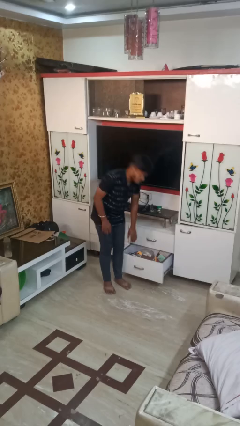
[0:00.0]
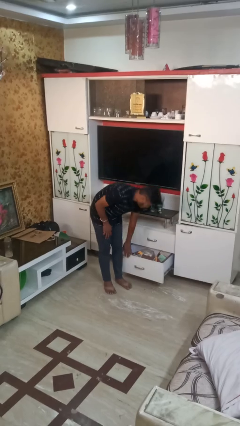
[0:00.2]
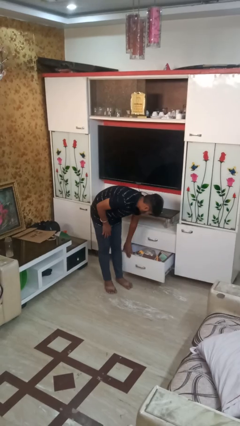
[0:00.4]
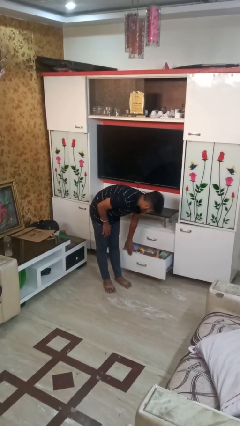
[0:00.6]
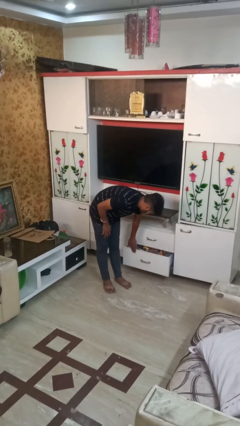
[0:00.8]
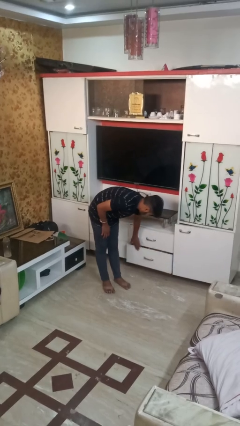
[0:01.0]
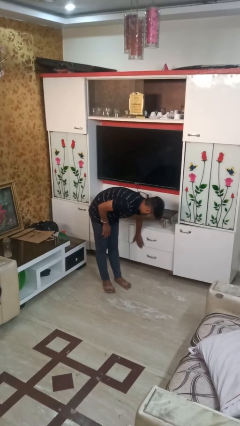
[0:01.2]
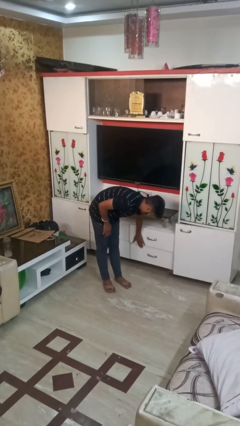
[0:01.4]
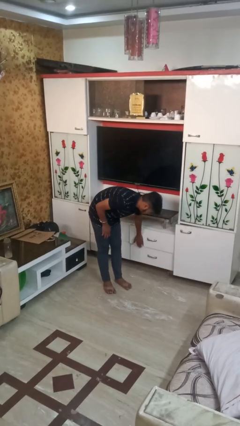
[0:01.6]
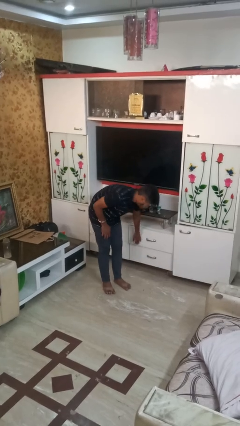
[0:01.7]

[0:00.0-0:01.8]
person closes dresser drawer

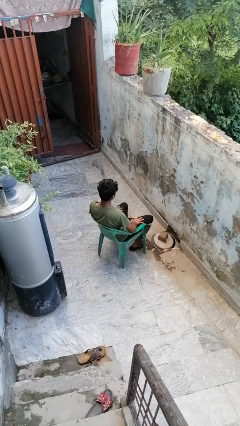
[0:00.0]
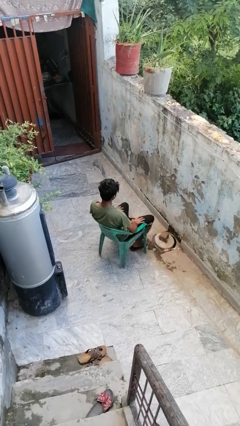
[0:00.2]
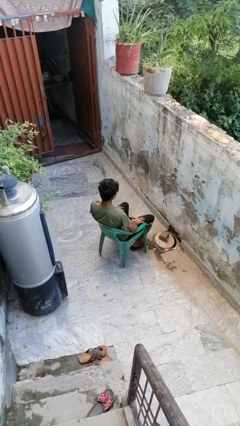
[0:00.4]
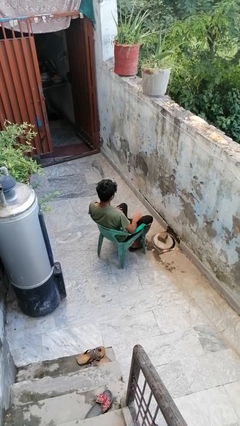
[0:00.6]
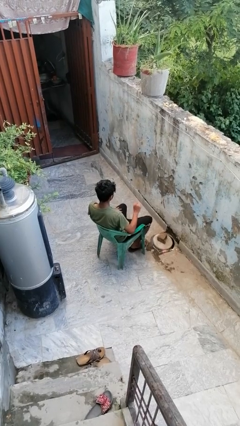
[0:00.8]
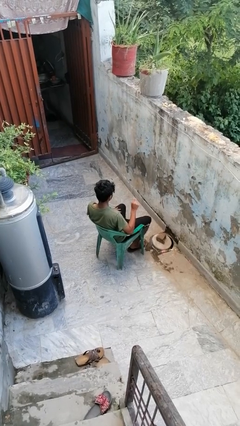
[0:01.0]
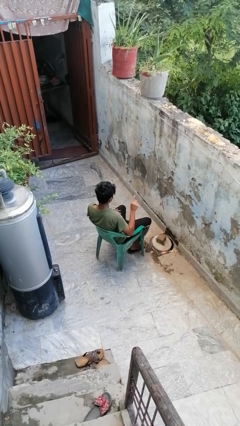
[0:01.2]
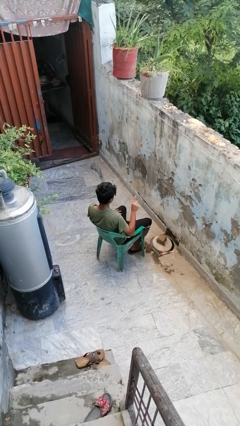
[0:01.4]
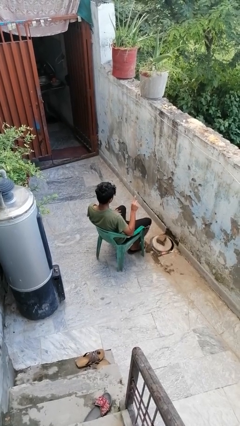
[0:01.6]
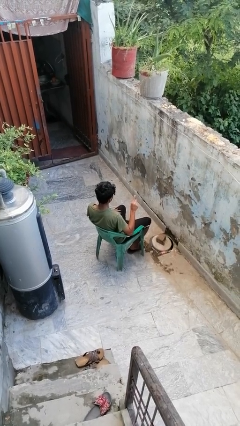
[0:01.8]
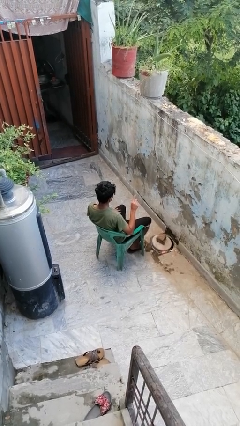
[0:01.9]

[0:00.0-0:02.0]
person gestures number one

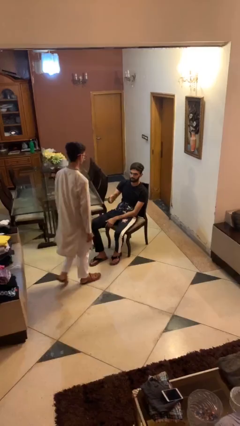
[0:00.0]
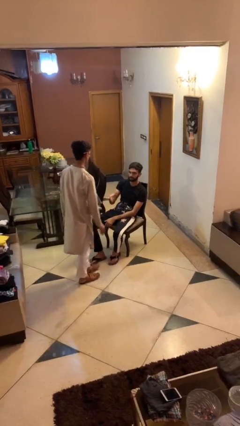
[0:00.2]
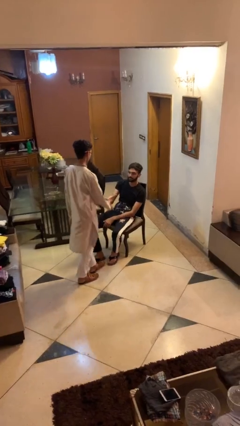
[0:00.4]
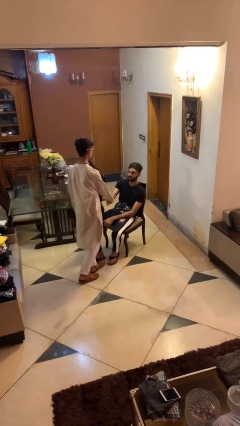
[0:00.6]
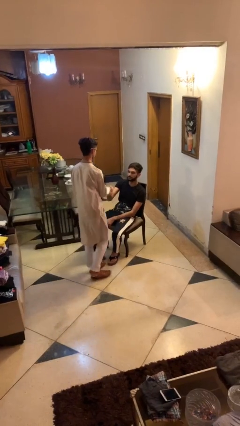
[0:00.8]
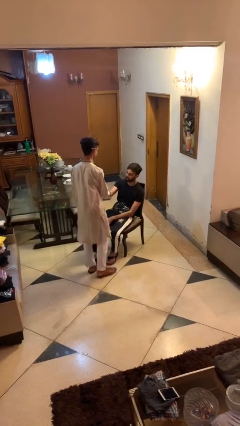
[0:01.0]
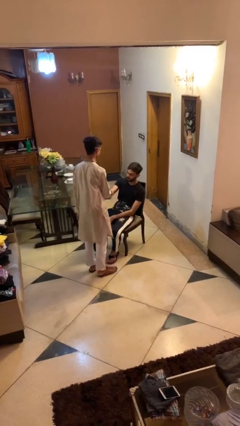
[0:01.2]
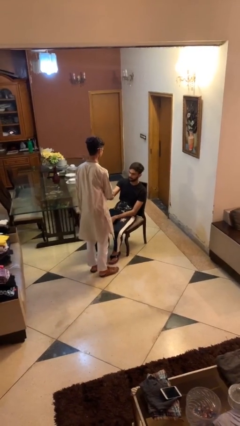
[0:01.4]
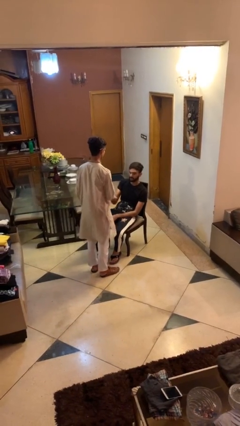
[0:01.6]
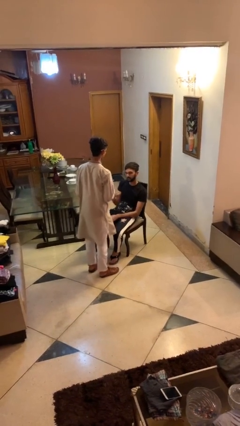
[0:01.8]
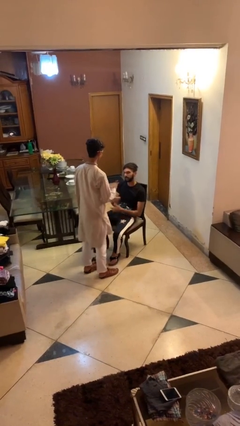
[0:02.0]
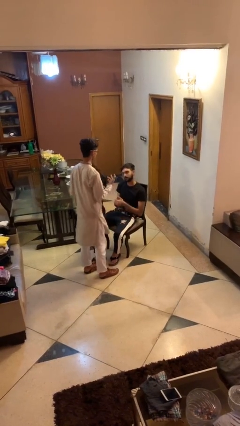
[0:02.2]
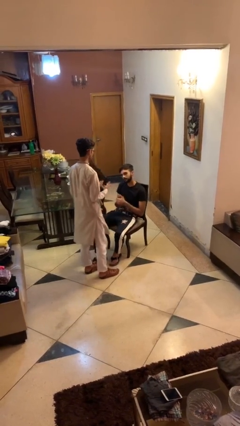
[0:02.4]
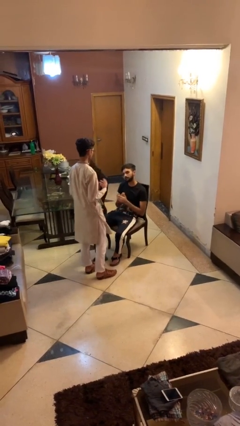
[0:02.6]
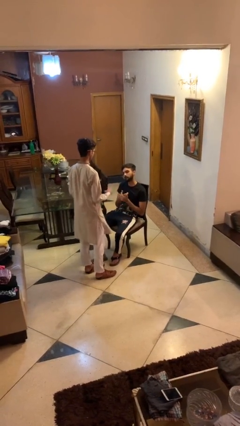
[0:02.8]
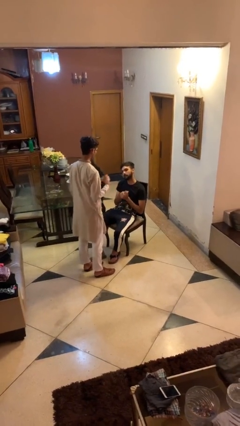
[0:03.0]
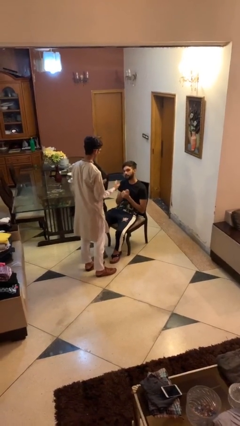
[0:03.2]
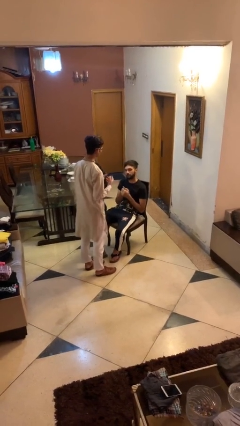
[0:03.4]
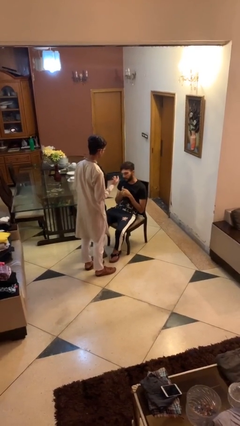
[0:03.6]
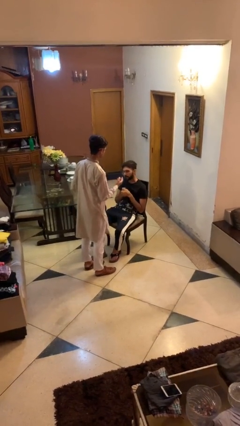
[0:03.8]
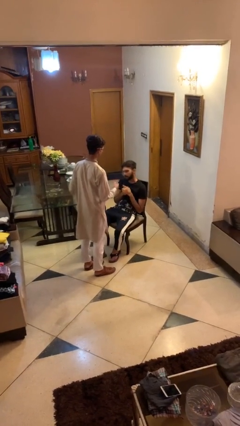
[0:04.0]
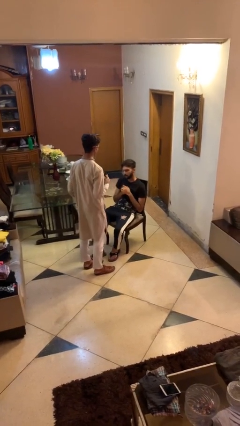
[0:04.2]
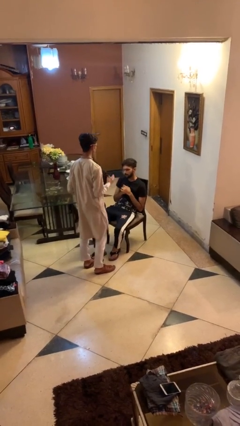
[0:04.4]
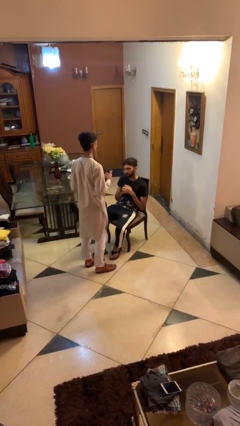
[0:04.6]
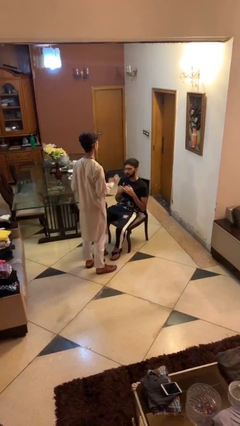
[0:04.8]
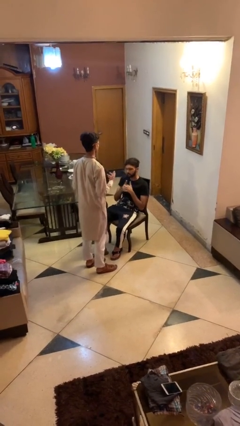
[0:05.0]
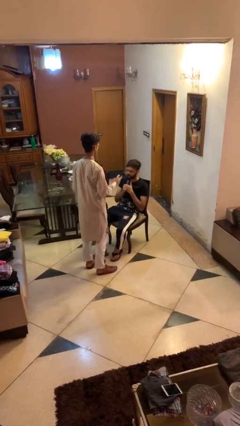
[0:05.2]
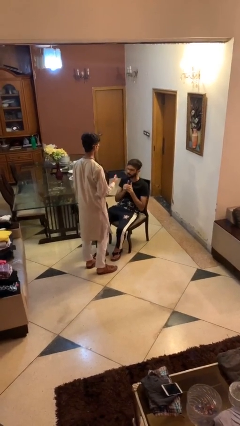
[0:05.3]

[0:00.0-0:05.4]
person shakes hand

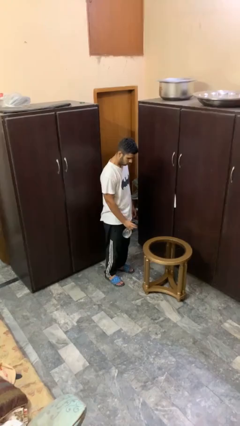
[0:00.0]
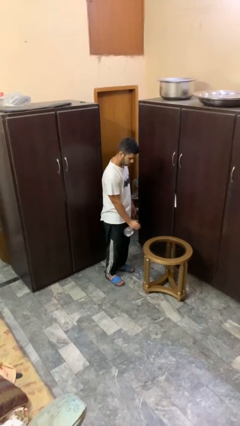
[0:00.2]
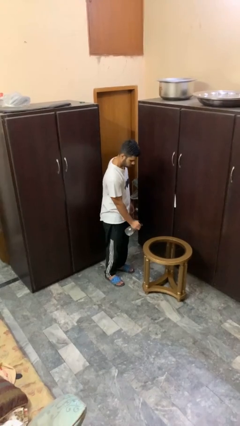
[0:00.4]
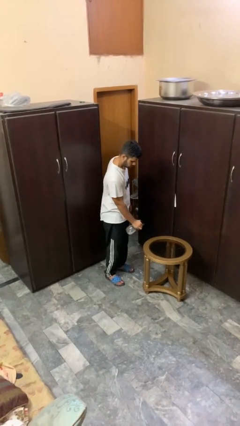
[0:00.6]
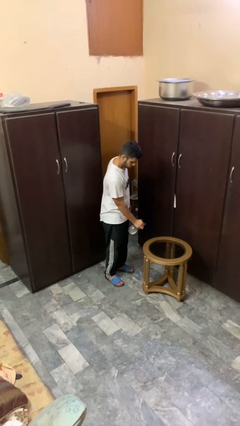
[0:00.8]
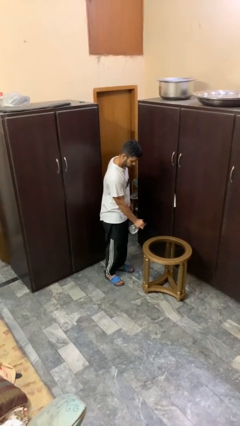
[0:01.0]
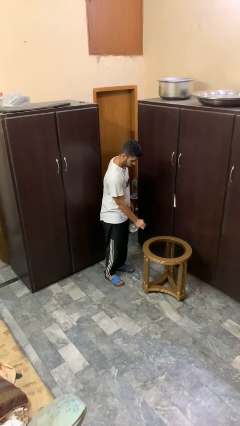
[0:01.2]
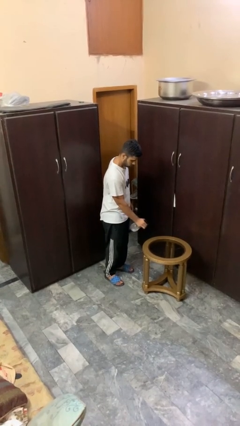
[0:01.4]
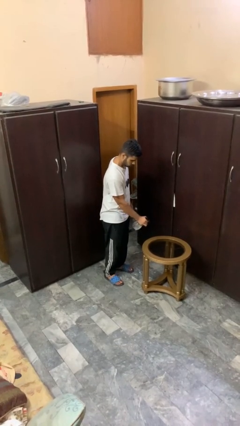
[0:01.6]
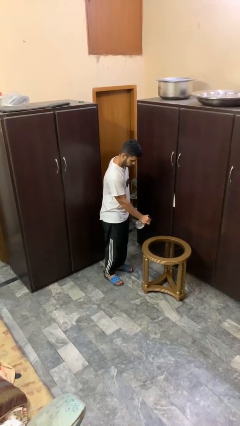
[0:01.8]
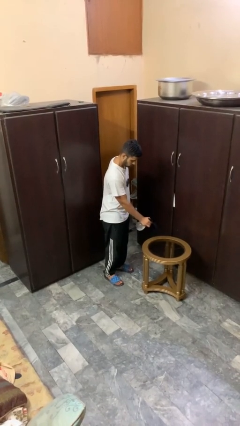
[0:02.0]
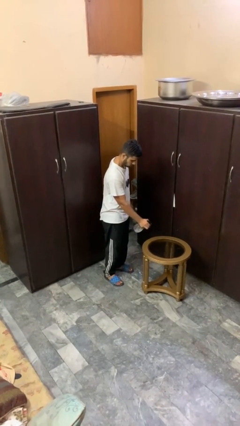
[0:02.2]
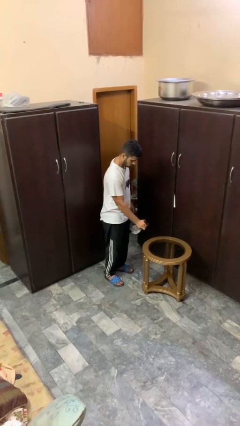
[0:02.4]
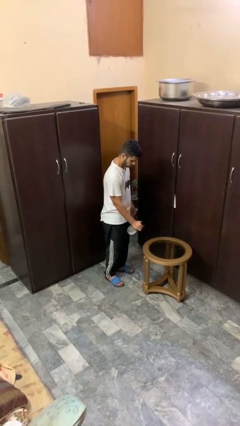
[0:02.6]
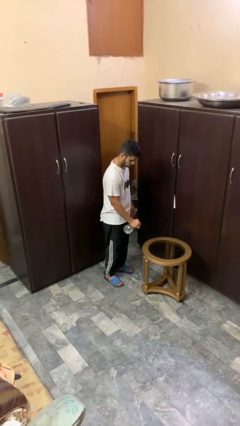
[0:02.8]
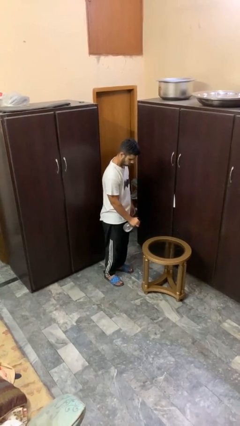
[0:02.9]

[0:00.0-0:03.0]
person sprays from bottle

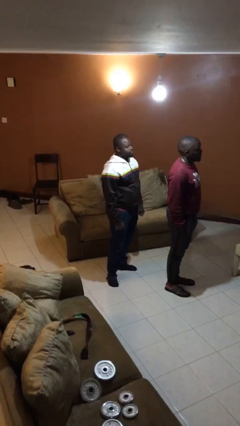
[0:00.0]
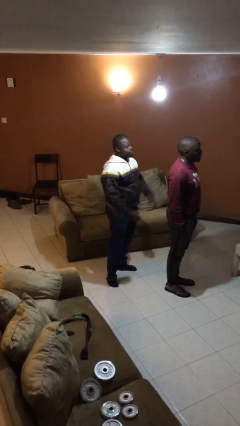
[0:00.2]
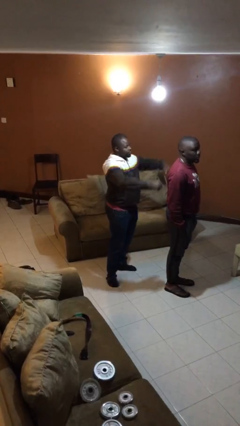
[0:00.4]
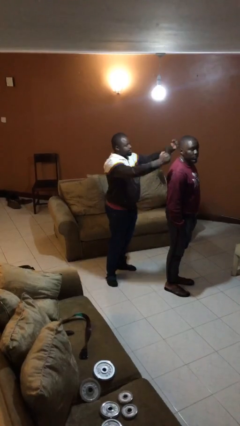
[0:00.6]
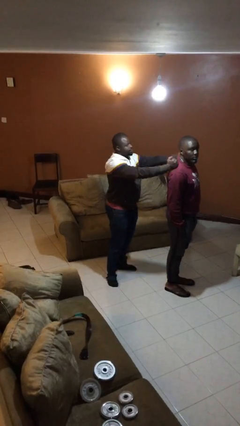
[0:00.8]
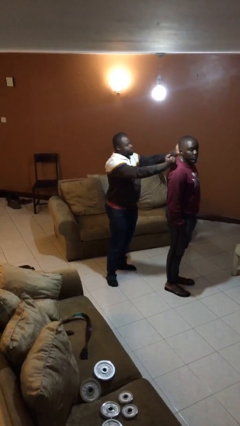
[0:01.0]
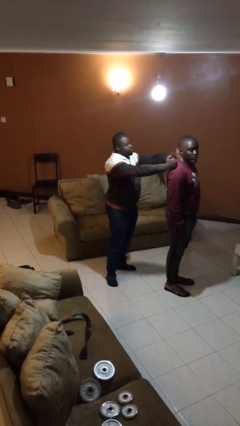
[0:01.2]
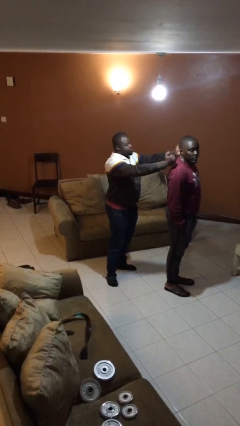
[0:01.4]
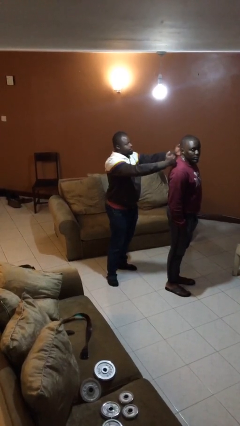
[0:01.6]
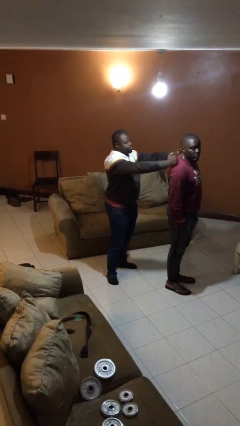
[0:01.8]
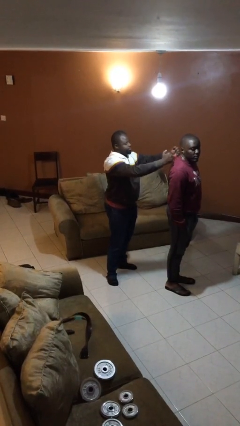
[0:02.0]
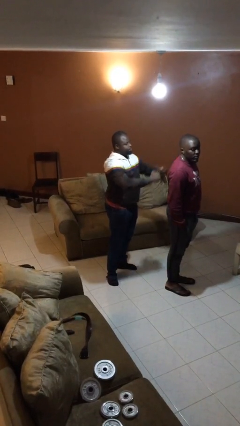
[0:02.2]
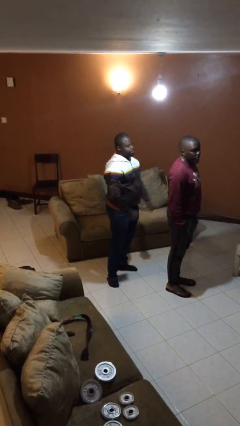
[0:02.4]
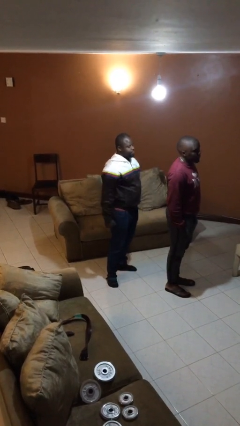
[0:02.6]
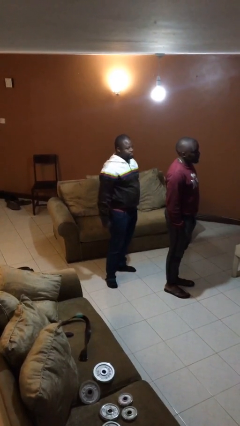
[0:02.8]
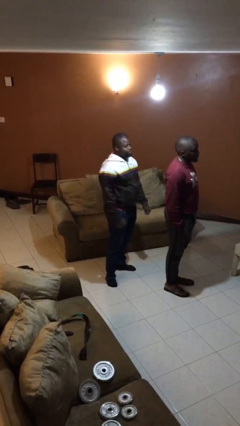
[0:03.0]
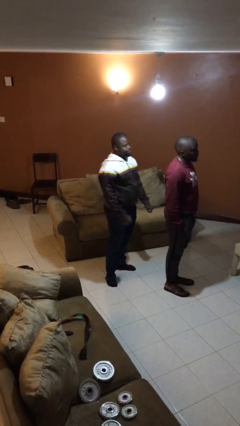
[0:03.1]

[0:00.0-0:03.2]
person pounds shoulders of person

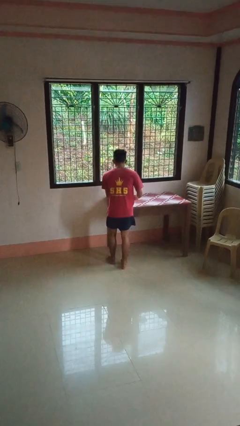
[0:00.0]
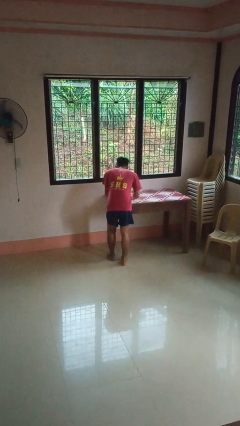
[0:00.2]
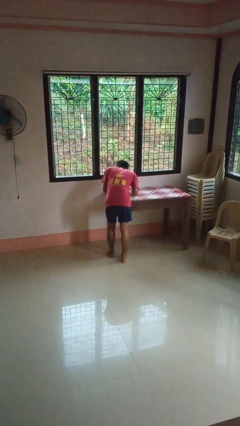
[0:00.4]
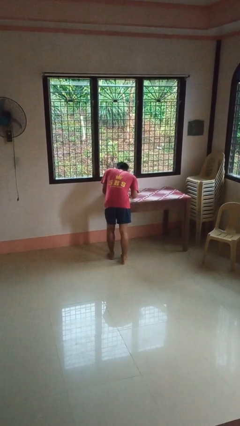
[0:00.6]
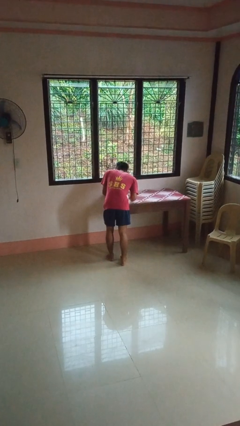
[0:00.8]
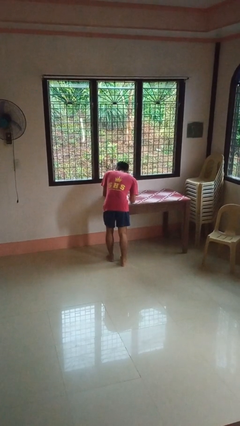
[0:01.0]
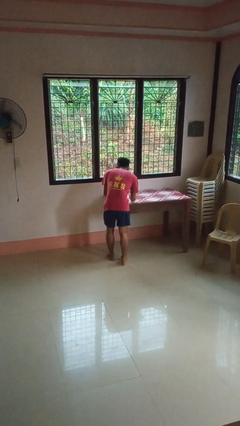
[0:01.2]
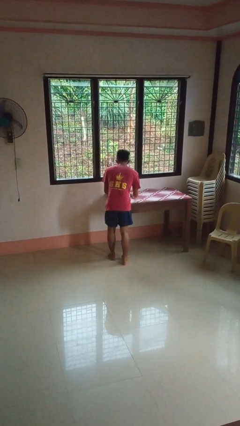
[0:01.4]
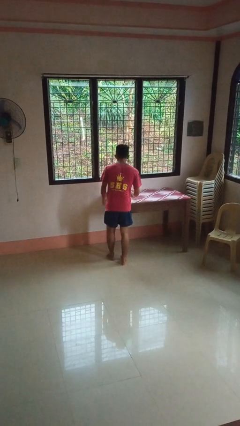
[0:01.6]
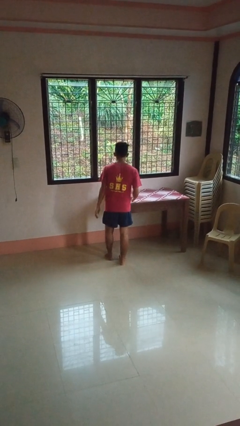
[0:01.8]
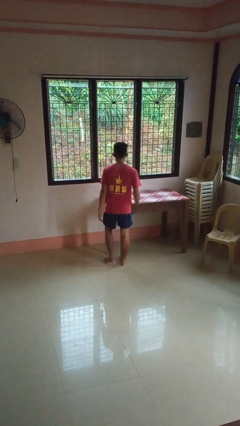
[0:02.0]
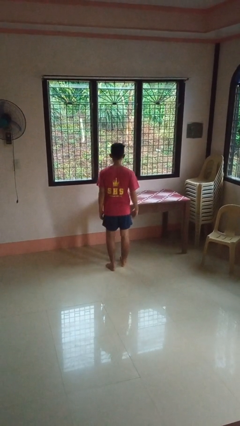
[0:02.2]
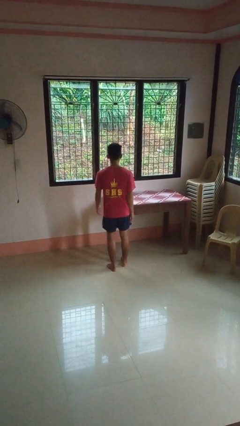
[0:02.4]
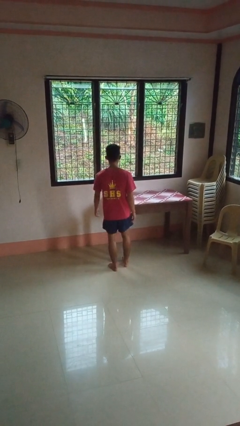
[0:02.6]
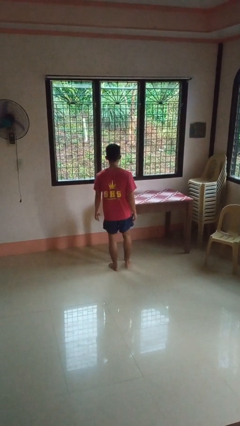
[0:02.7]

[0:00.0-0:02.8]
person bumps into table
